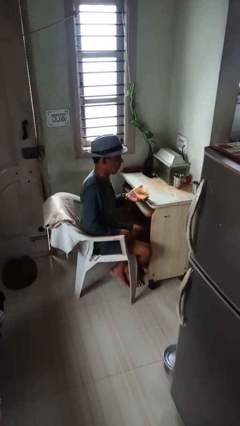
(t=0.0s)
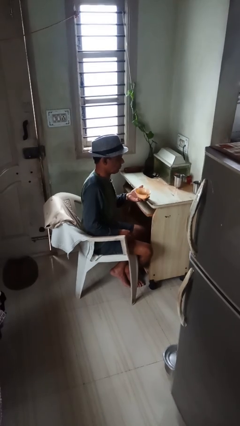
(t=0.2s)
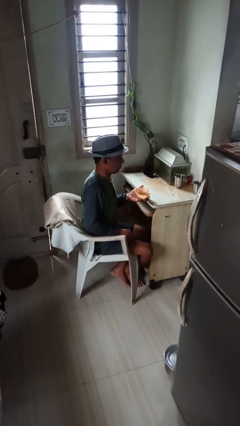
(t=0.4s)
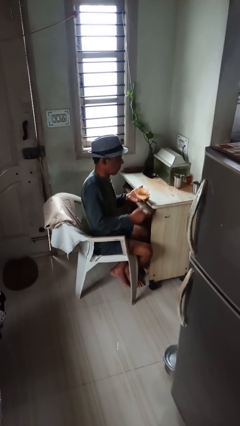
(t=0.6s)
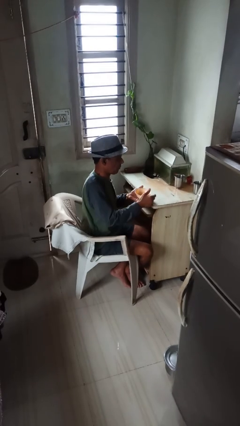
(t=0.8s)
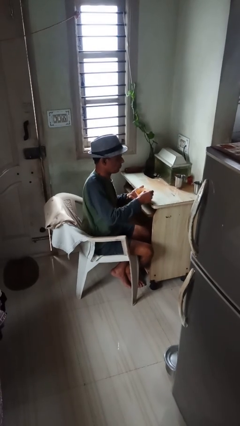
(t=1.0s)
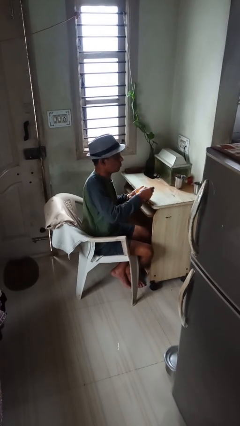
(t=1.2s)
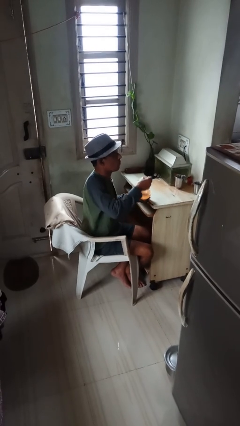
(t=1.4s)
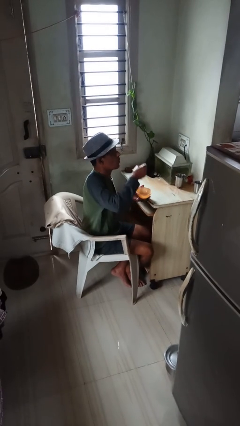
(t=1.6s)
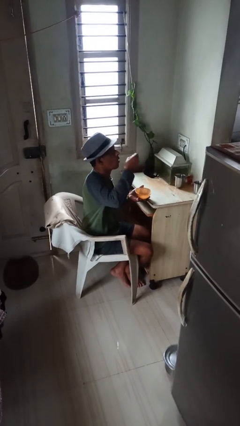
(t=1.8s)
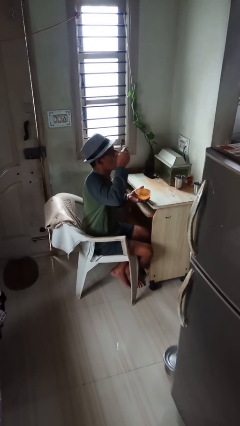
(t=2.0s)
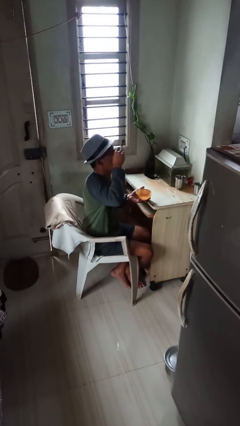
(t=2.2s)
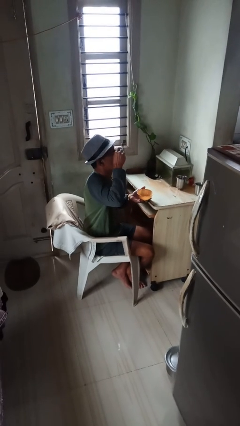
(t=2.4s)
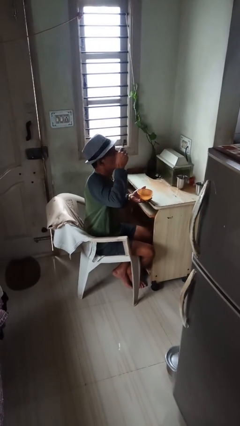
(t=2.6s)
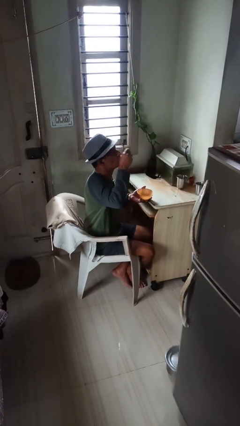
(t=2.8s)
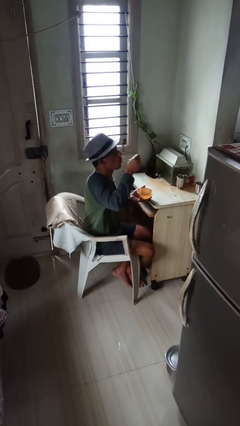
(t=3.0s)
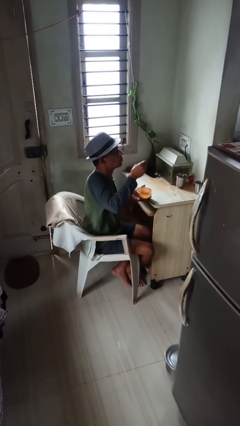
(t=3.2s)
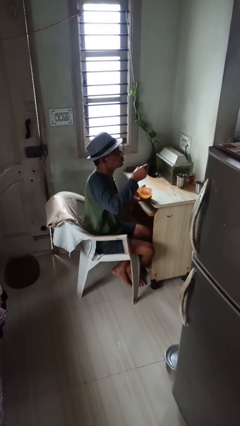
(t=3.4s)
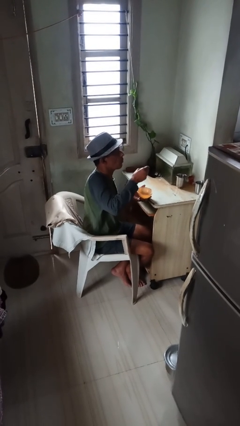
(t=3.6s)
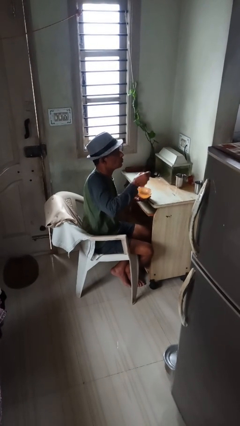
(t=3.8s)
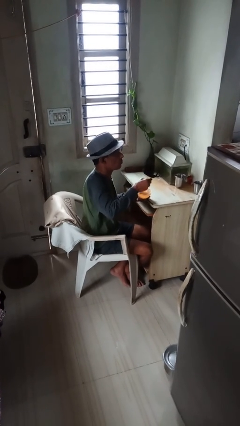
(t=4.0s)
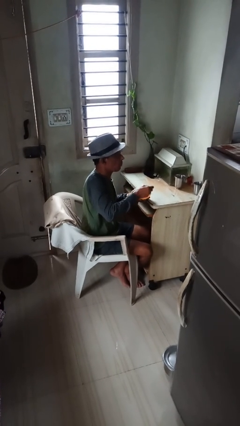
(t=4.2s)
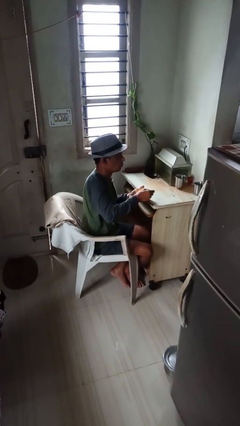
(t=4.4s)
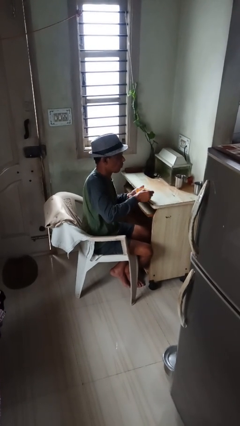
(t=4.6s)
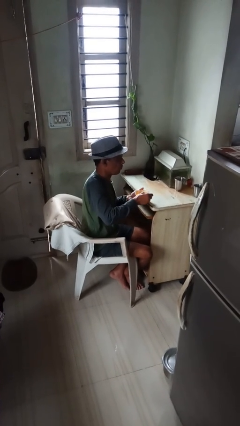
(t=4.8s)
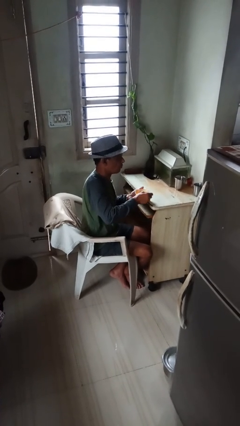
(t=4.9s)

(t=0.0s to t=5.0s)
person eats with utensil

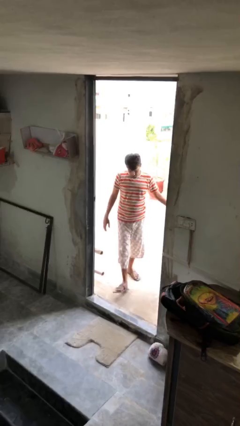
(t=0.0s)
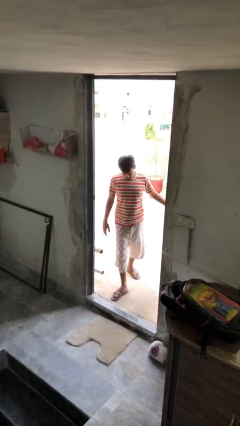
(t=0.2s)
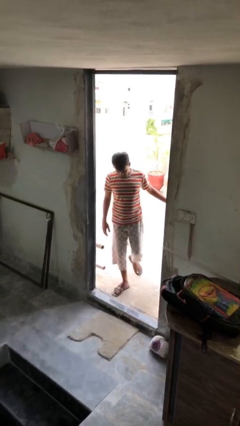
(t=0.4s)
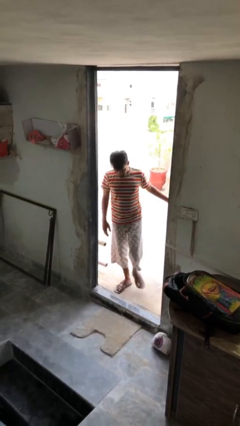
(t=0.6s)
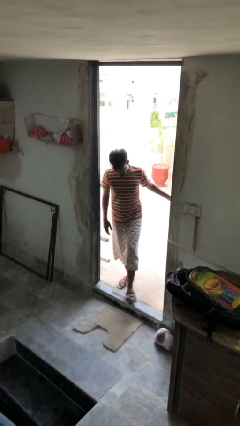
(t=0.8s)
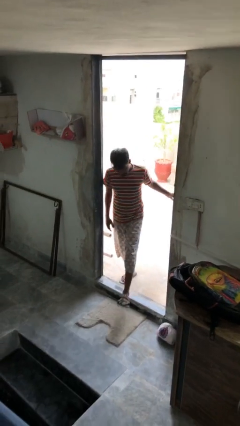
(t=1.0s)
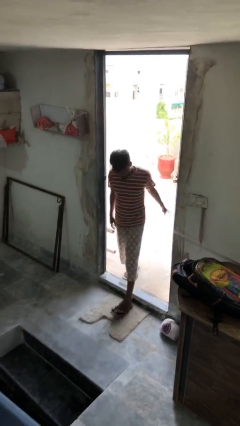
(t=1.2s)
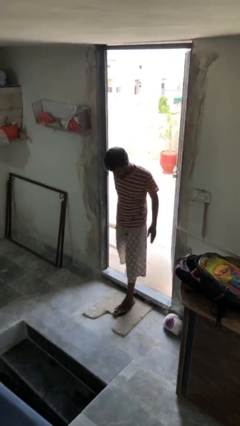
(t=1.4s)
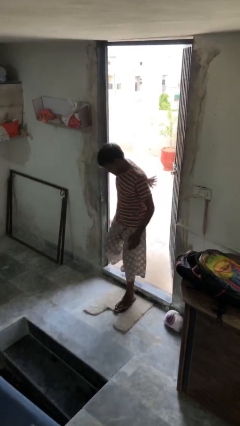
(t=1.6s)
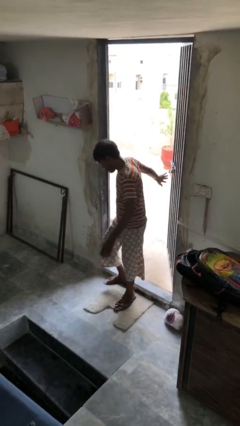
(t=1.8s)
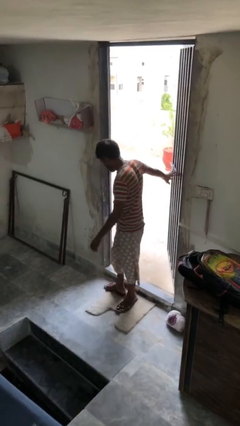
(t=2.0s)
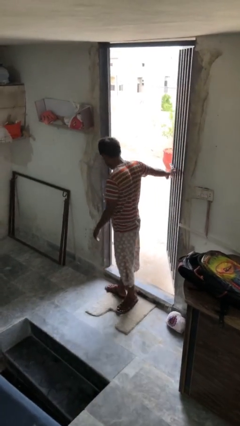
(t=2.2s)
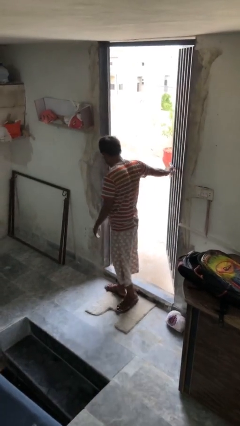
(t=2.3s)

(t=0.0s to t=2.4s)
person enters scene through structure

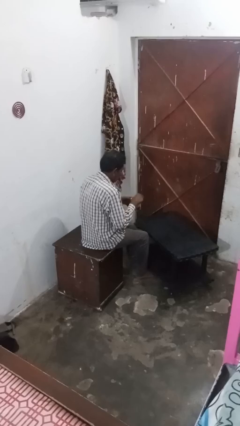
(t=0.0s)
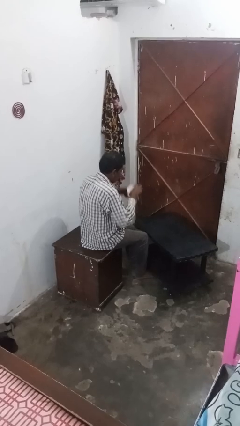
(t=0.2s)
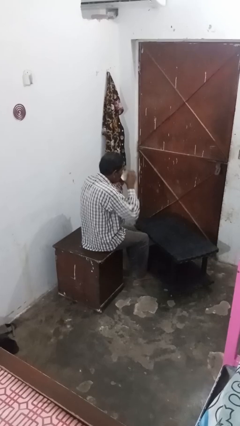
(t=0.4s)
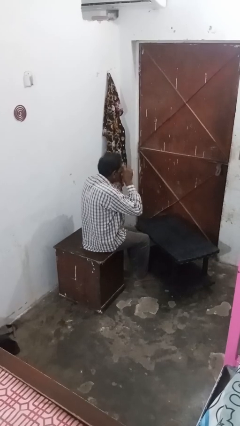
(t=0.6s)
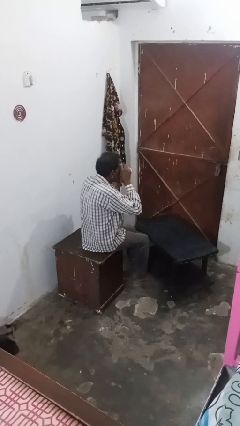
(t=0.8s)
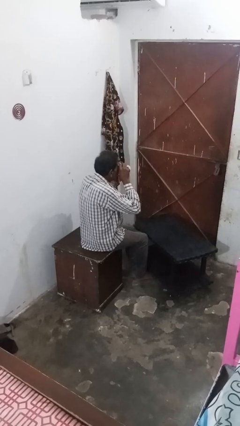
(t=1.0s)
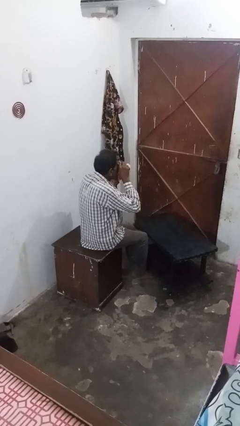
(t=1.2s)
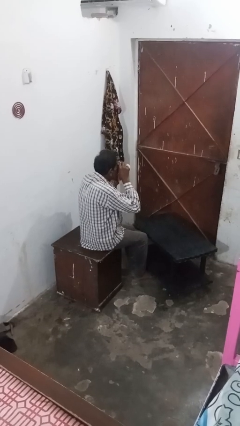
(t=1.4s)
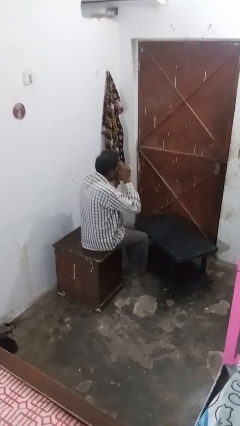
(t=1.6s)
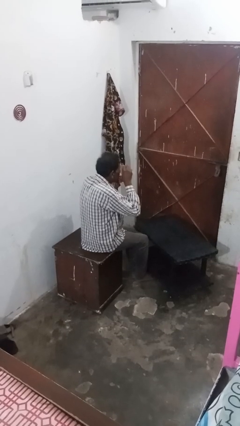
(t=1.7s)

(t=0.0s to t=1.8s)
person drinks from mug

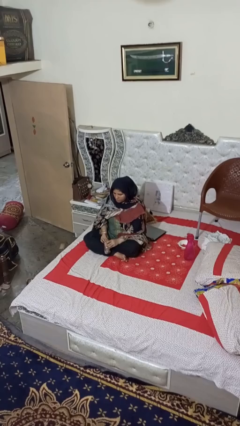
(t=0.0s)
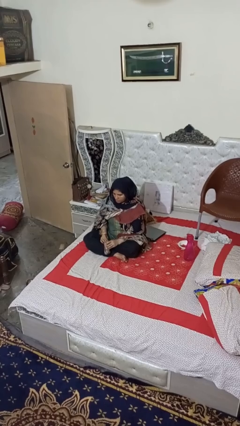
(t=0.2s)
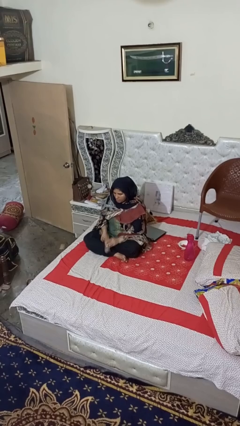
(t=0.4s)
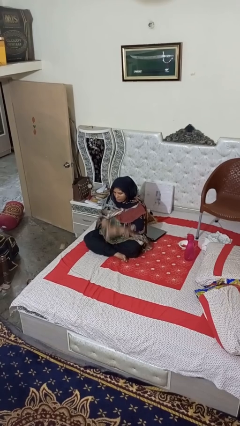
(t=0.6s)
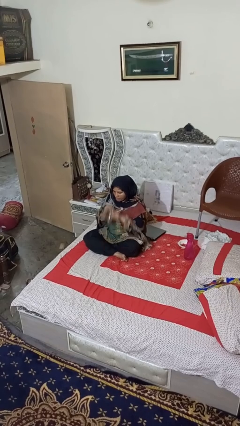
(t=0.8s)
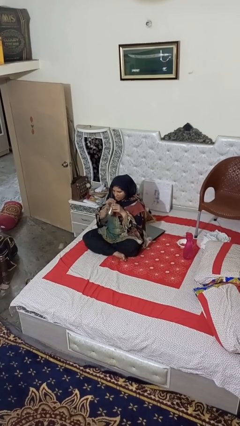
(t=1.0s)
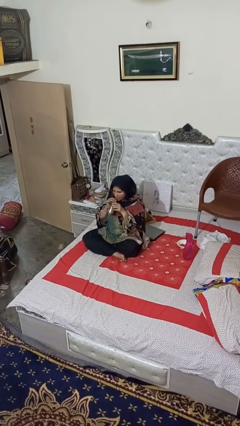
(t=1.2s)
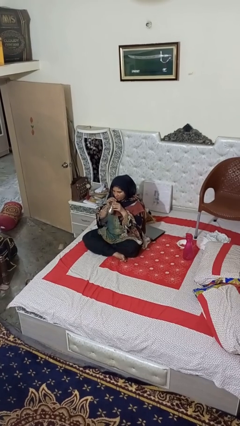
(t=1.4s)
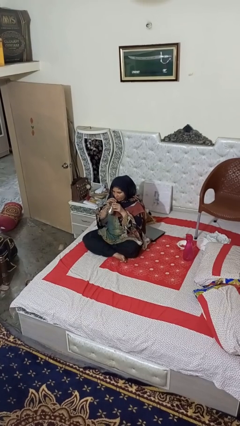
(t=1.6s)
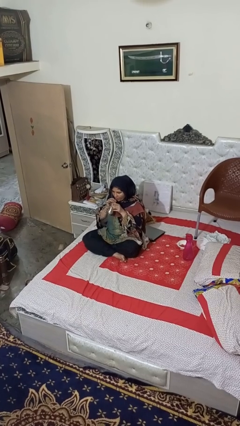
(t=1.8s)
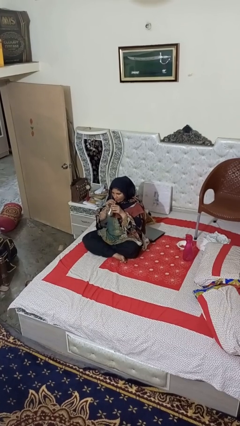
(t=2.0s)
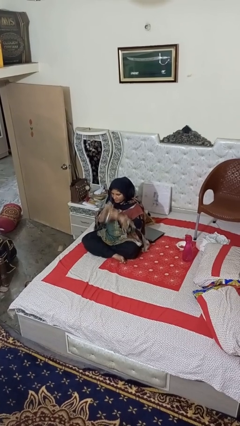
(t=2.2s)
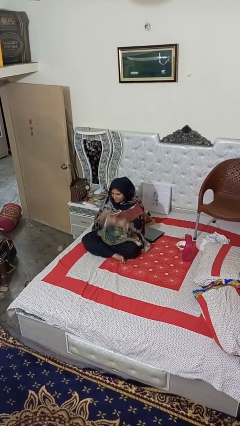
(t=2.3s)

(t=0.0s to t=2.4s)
person drinks from straw

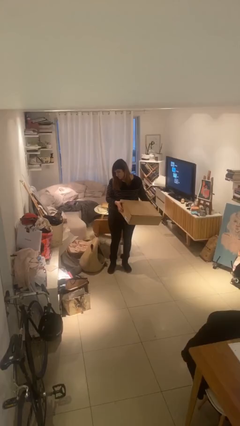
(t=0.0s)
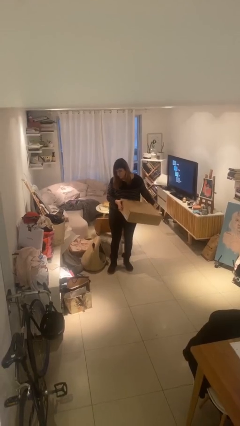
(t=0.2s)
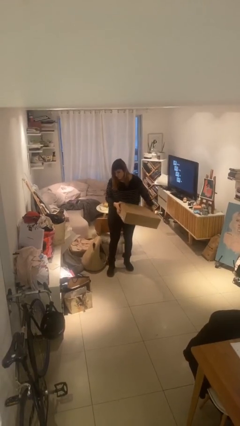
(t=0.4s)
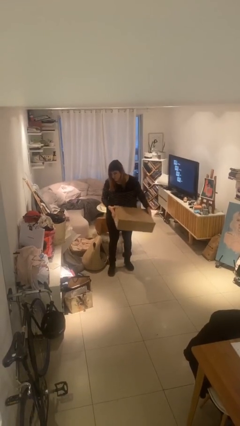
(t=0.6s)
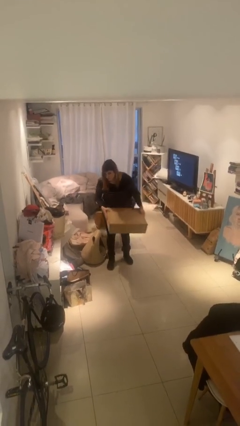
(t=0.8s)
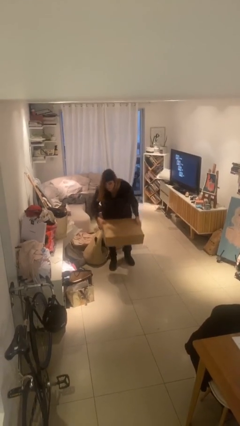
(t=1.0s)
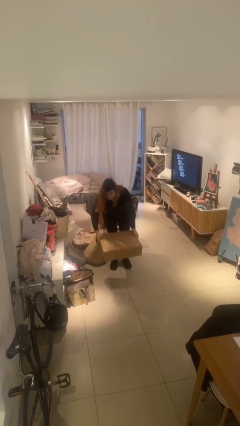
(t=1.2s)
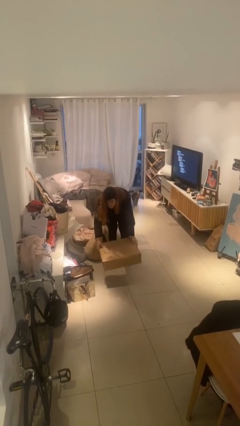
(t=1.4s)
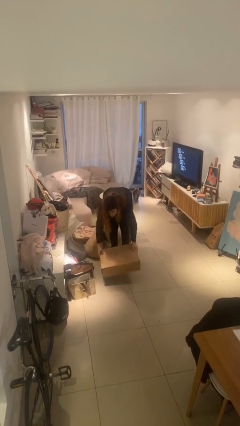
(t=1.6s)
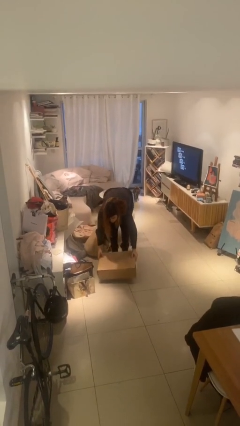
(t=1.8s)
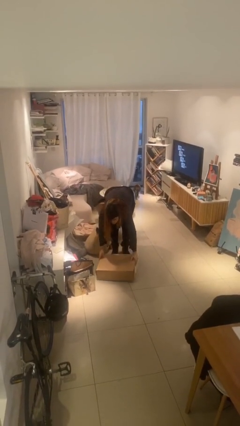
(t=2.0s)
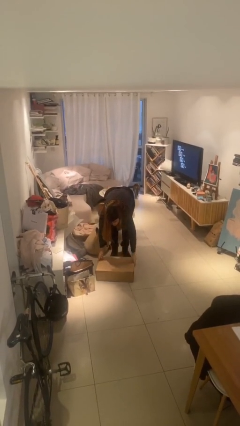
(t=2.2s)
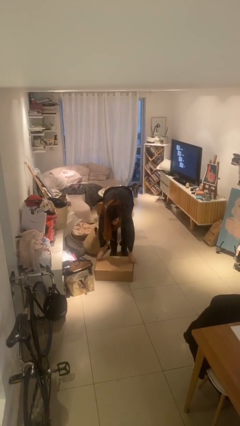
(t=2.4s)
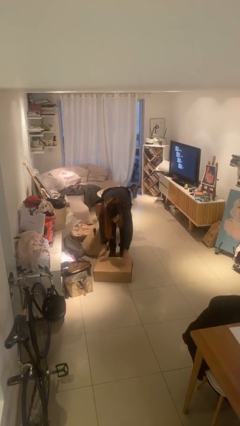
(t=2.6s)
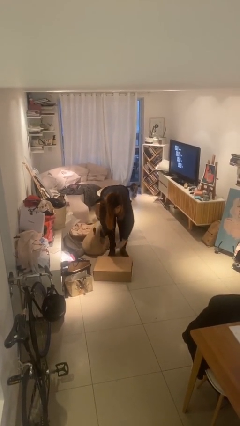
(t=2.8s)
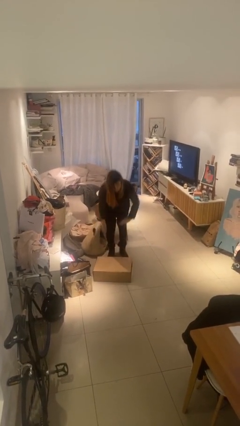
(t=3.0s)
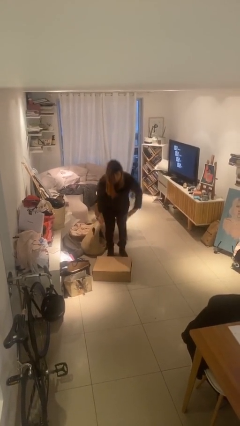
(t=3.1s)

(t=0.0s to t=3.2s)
person puts down object on floor

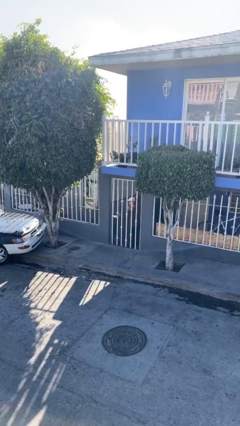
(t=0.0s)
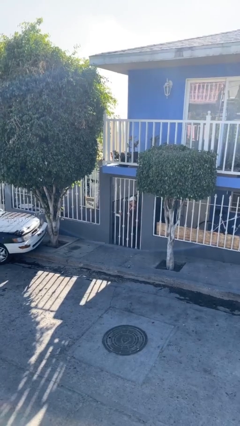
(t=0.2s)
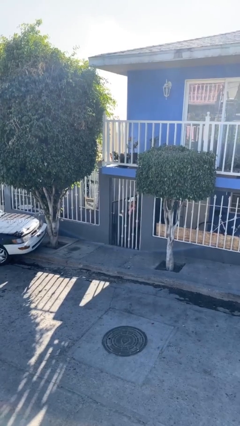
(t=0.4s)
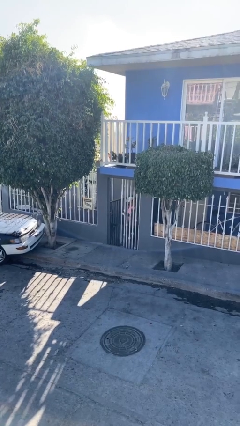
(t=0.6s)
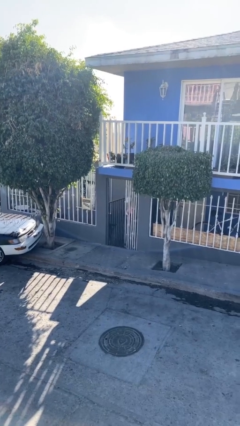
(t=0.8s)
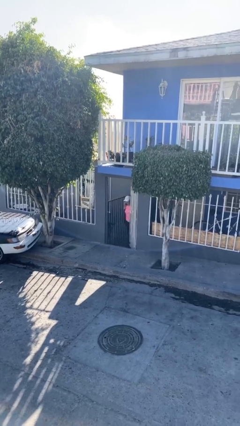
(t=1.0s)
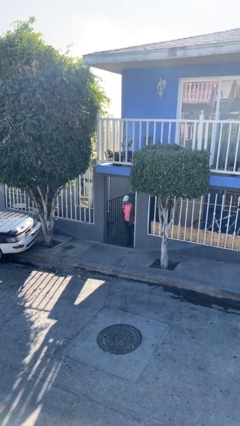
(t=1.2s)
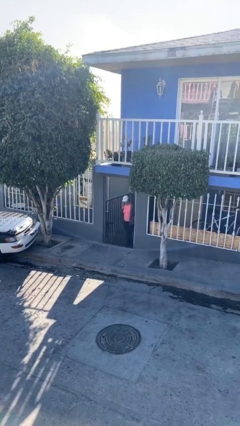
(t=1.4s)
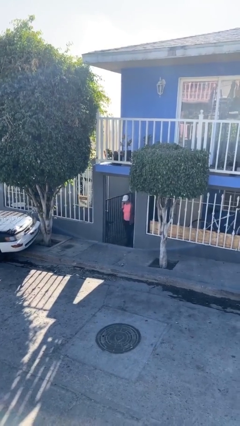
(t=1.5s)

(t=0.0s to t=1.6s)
person opens facility door

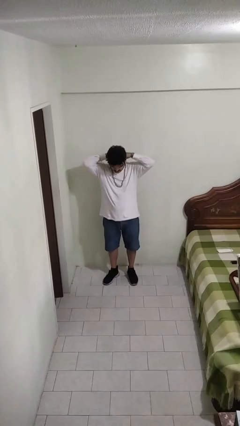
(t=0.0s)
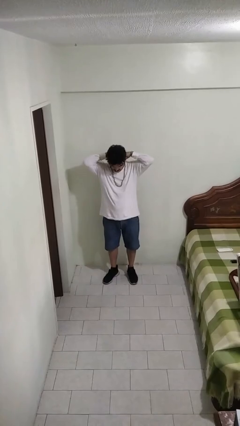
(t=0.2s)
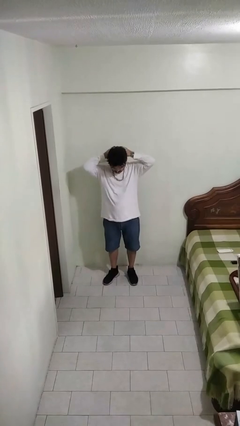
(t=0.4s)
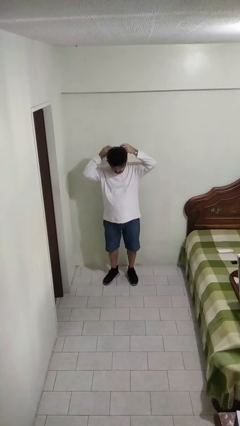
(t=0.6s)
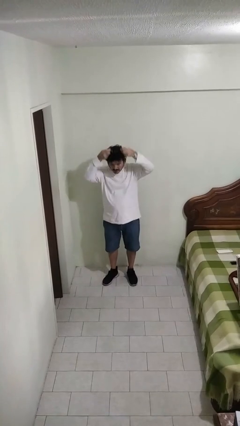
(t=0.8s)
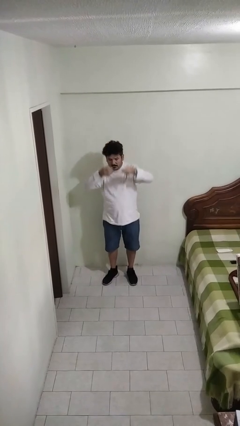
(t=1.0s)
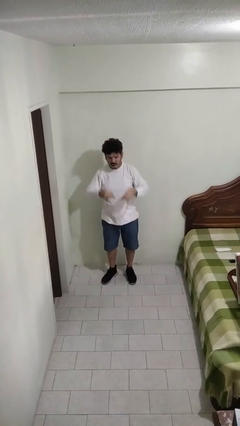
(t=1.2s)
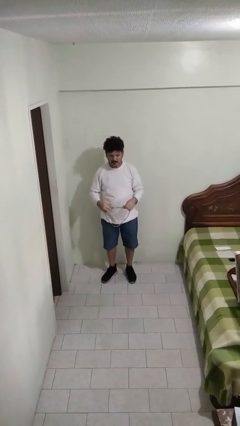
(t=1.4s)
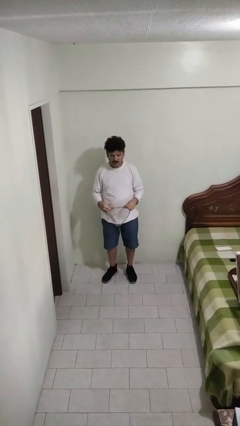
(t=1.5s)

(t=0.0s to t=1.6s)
person takes off necklace
